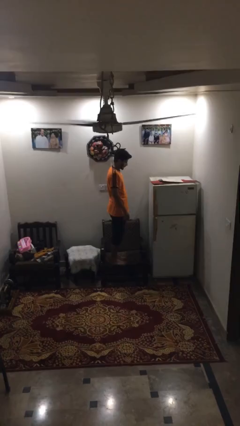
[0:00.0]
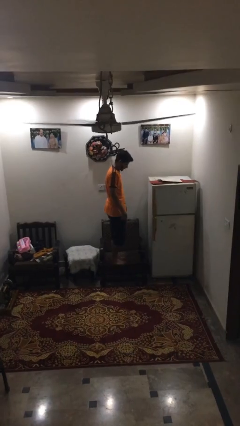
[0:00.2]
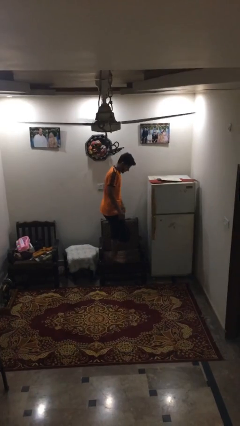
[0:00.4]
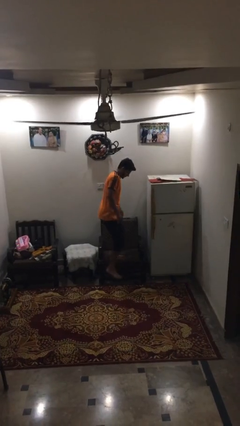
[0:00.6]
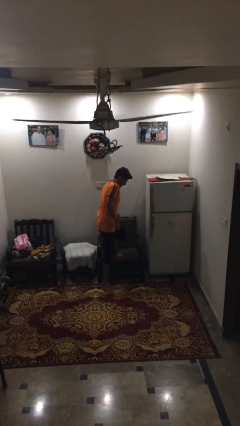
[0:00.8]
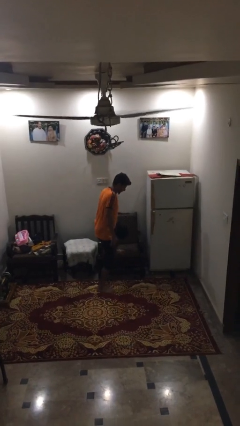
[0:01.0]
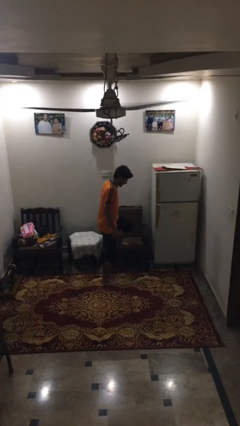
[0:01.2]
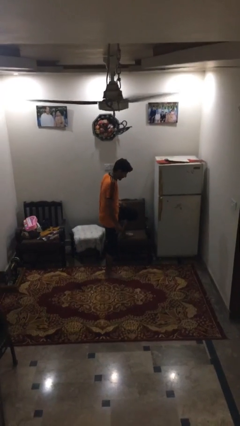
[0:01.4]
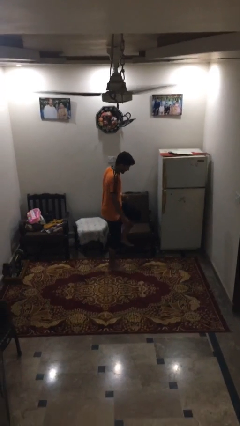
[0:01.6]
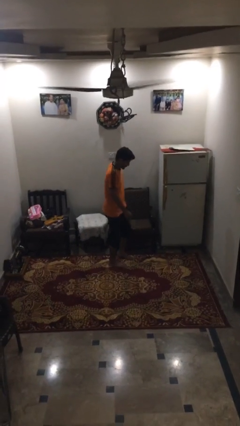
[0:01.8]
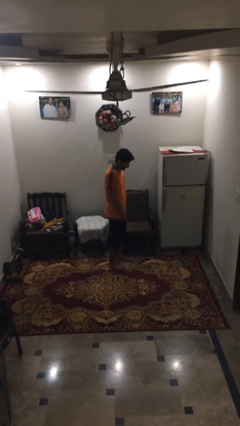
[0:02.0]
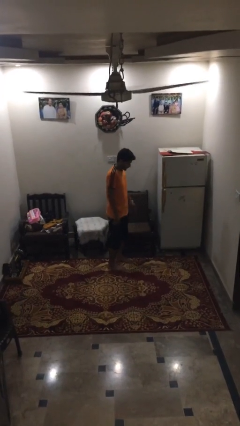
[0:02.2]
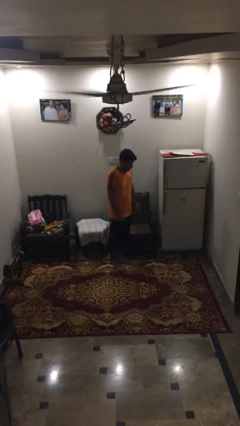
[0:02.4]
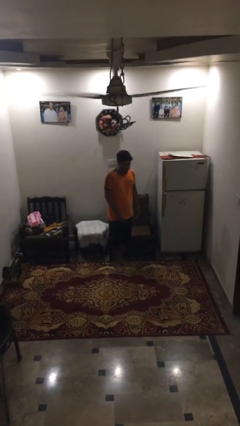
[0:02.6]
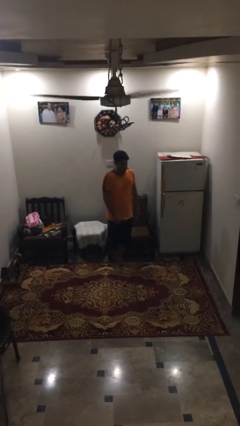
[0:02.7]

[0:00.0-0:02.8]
person climbs off couch

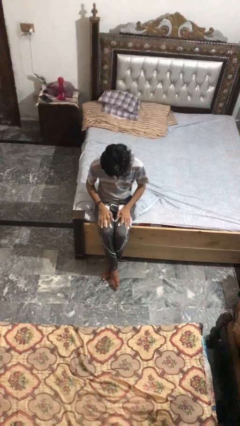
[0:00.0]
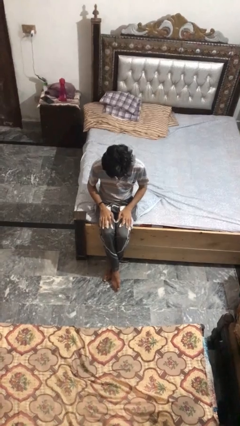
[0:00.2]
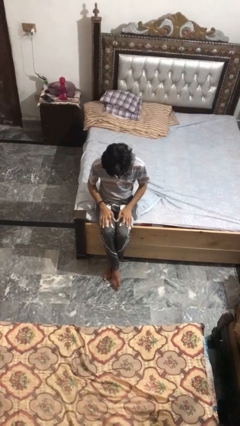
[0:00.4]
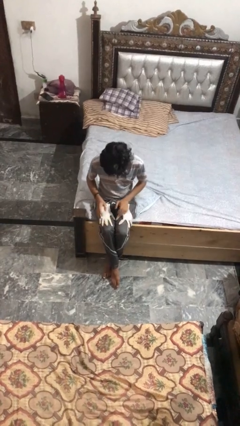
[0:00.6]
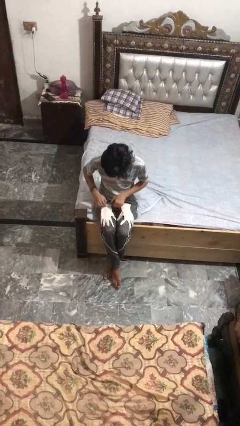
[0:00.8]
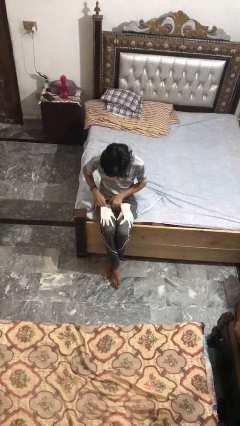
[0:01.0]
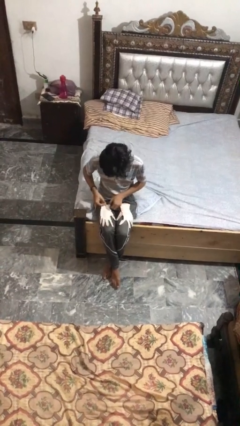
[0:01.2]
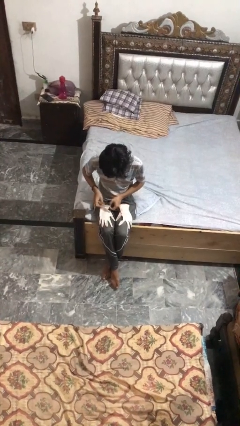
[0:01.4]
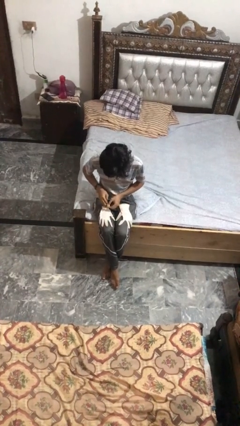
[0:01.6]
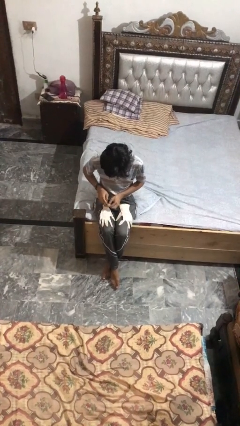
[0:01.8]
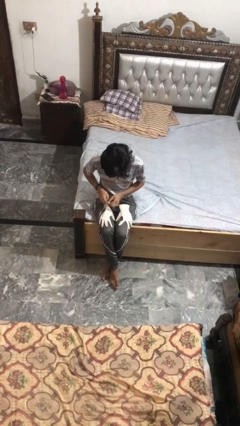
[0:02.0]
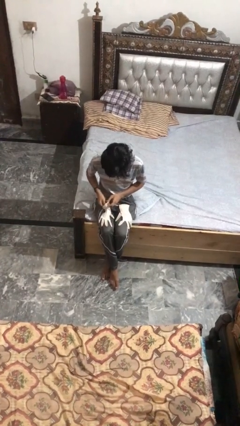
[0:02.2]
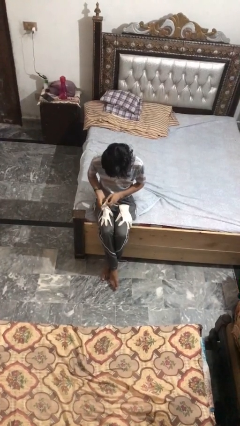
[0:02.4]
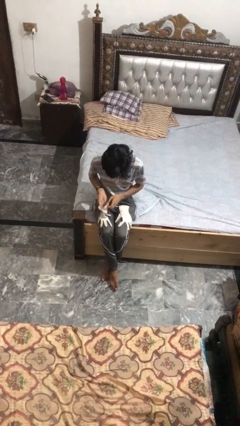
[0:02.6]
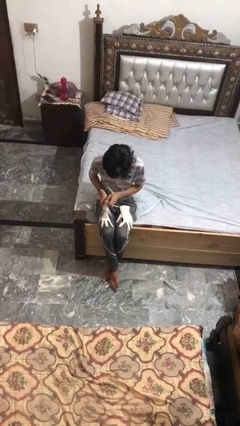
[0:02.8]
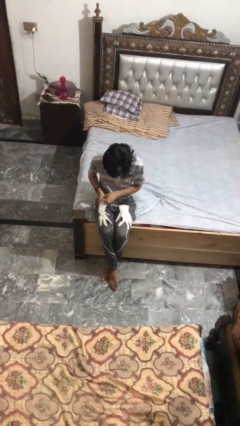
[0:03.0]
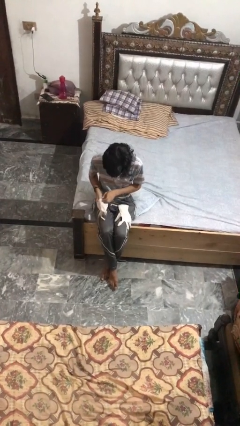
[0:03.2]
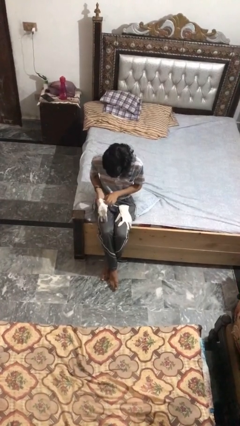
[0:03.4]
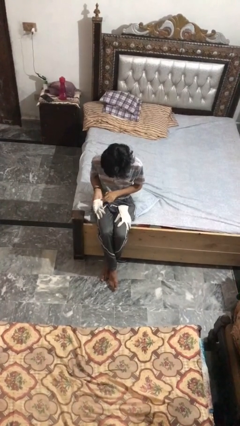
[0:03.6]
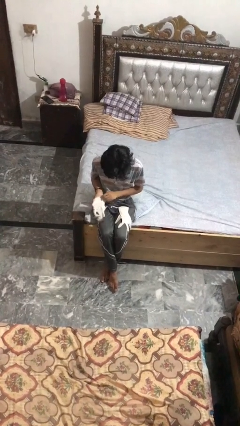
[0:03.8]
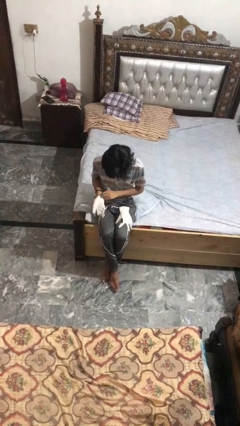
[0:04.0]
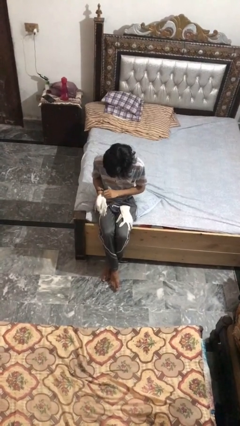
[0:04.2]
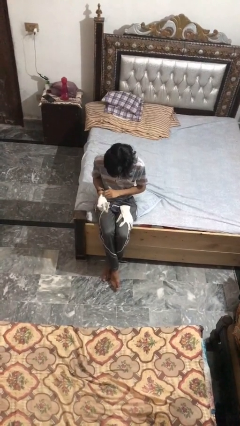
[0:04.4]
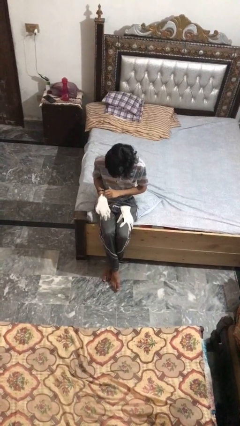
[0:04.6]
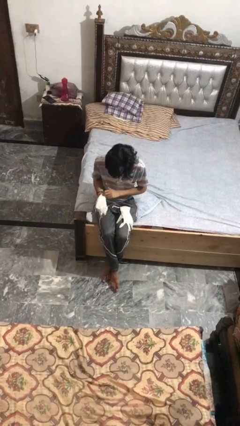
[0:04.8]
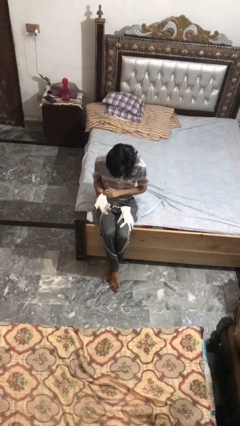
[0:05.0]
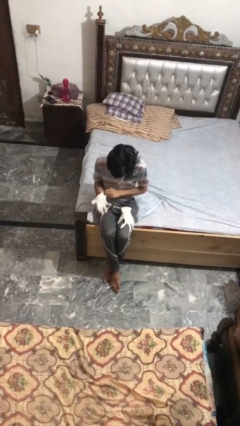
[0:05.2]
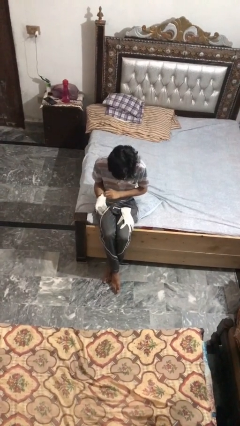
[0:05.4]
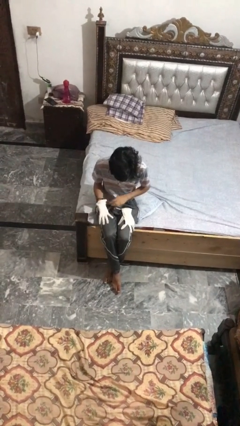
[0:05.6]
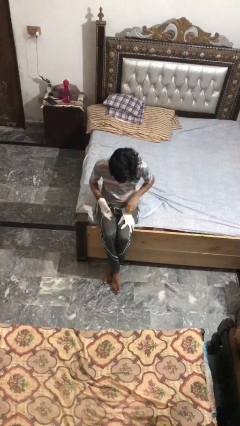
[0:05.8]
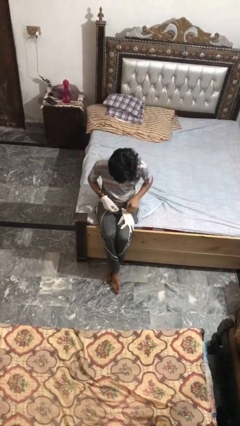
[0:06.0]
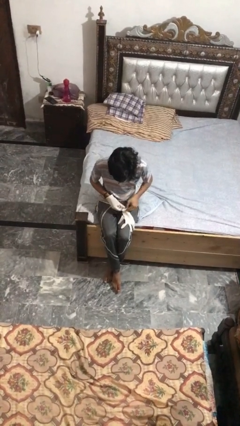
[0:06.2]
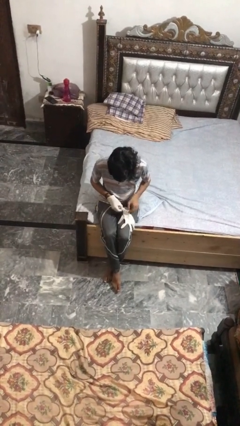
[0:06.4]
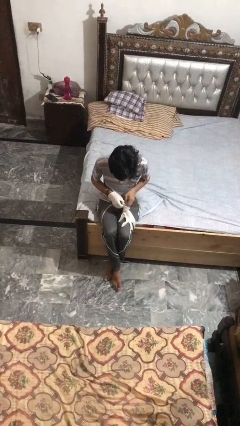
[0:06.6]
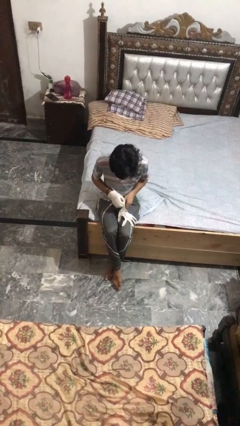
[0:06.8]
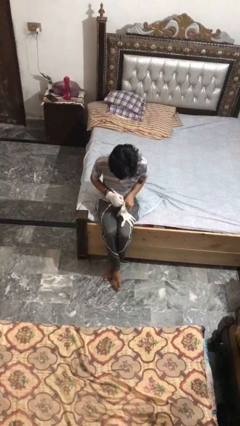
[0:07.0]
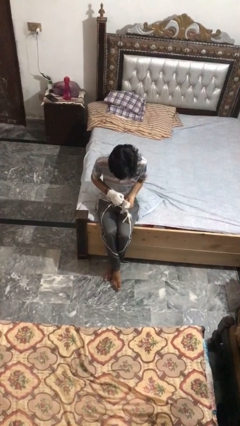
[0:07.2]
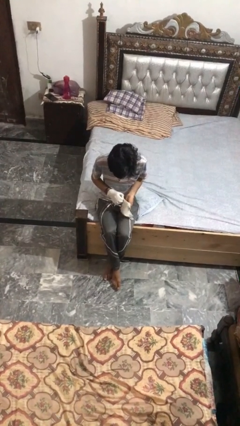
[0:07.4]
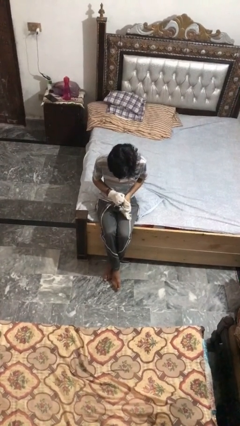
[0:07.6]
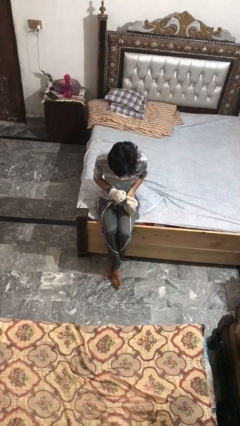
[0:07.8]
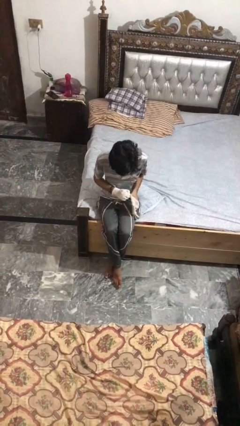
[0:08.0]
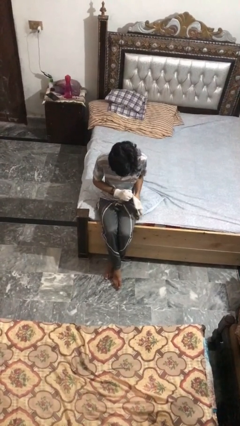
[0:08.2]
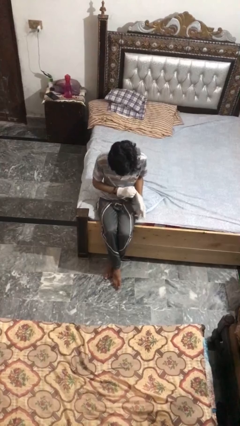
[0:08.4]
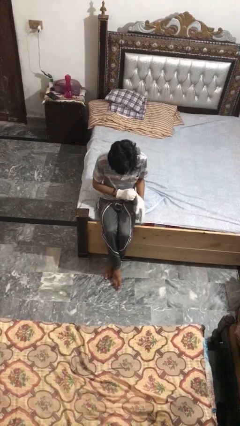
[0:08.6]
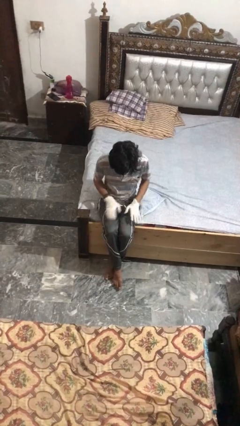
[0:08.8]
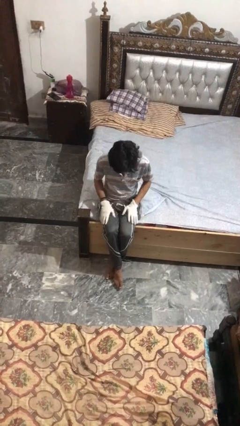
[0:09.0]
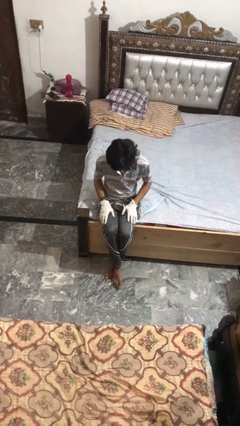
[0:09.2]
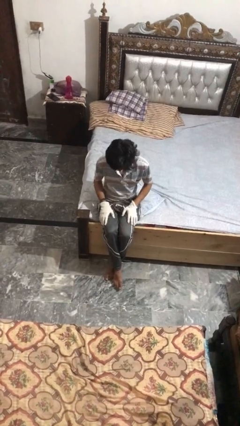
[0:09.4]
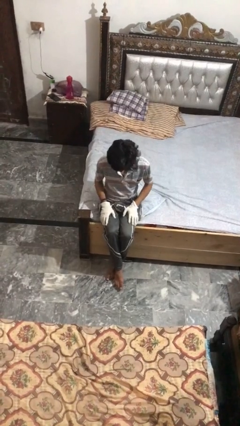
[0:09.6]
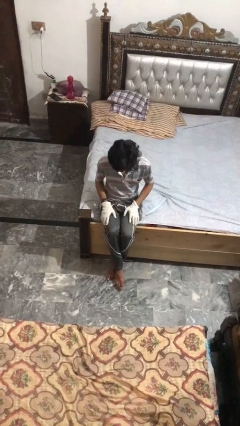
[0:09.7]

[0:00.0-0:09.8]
person puts on gloves

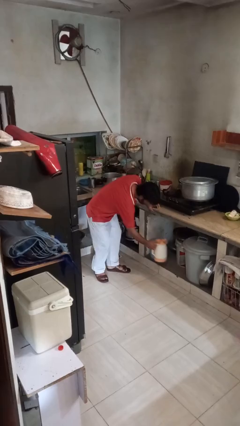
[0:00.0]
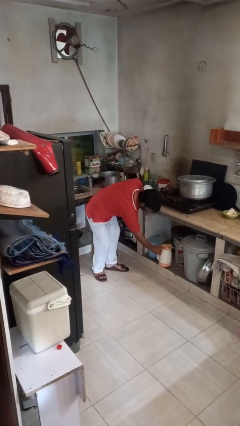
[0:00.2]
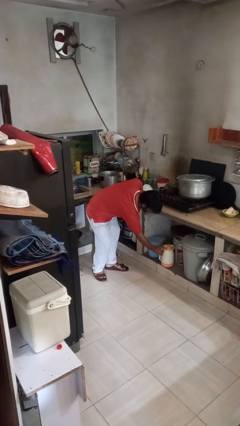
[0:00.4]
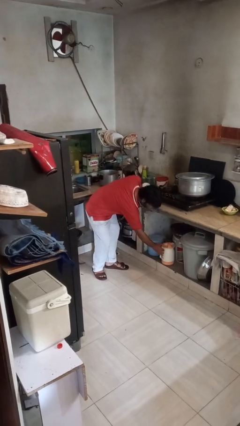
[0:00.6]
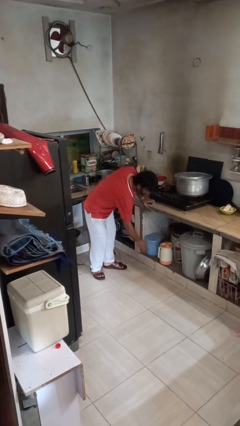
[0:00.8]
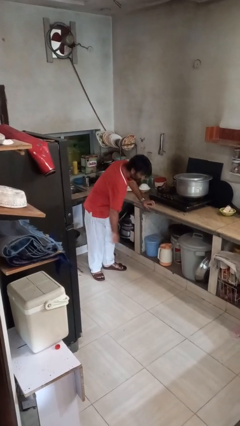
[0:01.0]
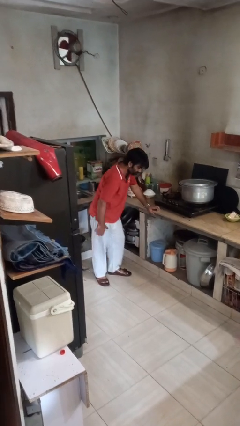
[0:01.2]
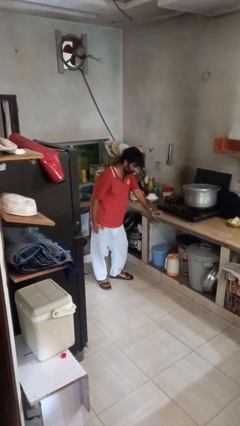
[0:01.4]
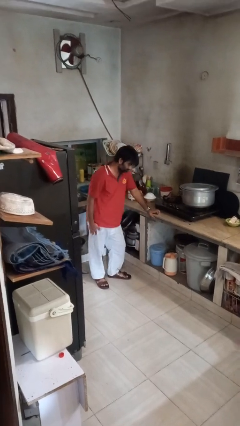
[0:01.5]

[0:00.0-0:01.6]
person puts down object into cabinet

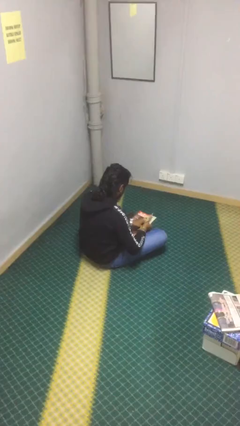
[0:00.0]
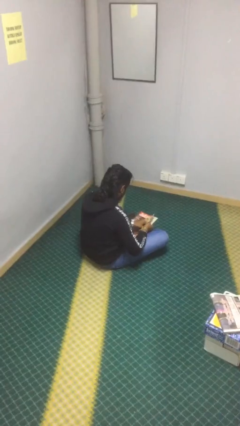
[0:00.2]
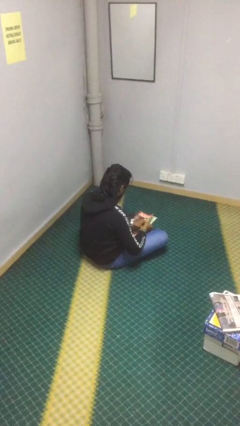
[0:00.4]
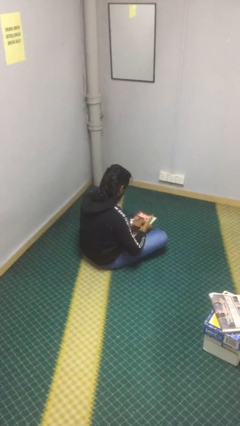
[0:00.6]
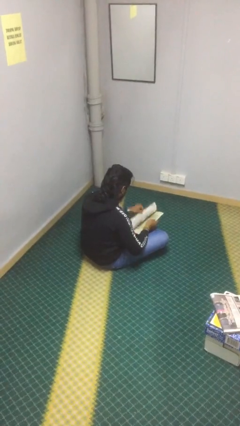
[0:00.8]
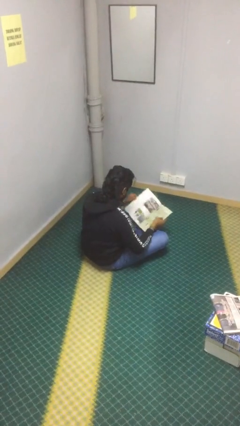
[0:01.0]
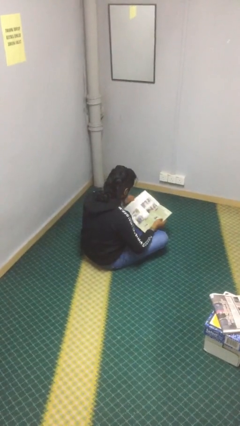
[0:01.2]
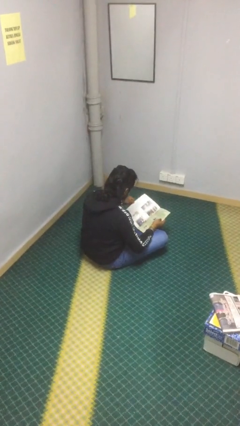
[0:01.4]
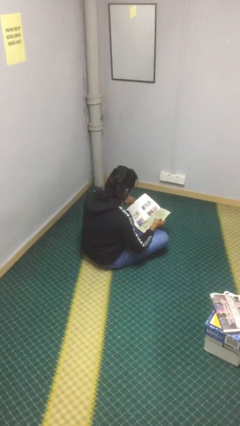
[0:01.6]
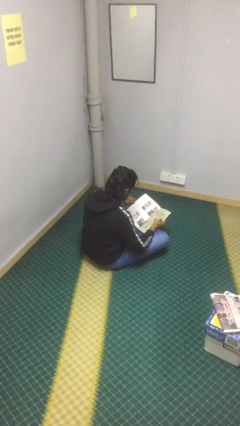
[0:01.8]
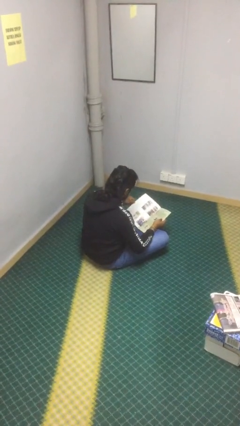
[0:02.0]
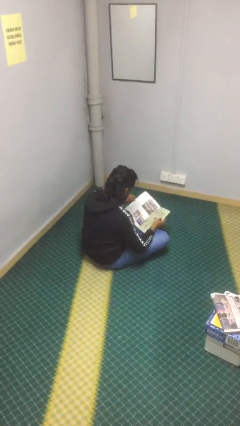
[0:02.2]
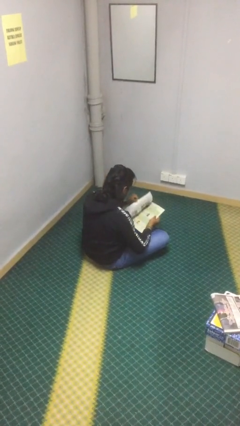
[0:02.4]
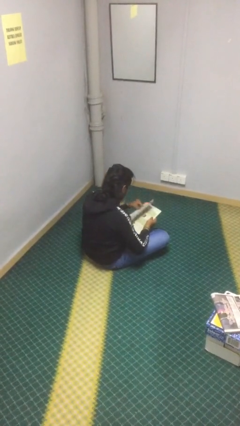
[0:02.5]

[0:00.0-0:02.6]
person reads magazine

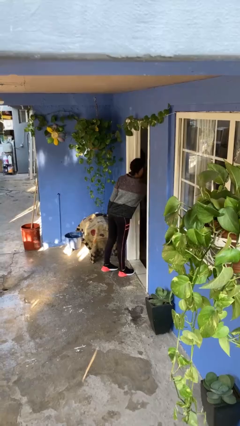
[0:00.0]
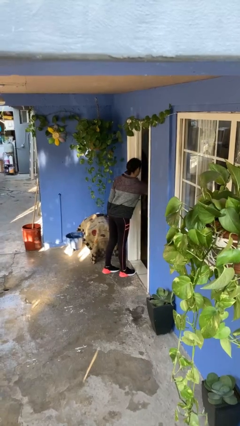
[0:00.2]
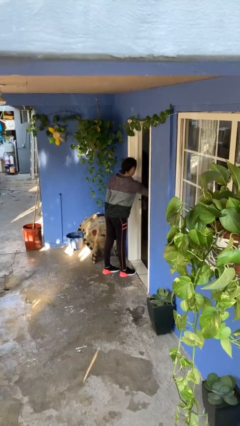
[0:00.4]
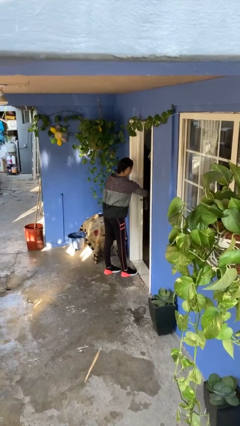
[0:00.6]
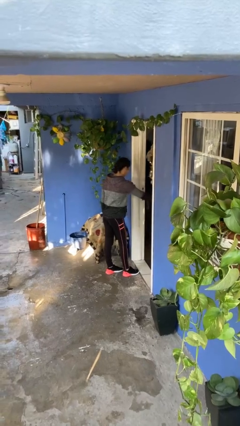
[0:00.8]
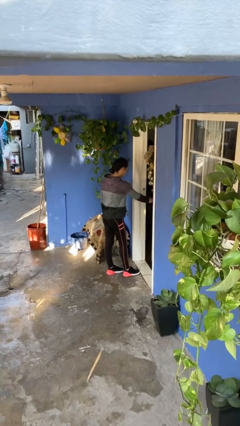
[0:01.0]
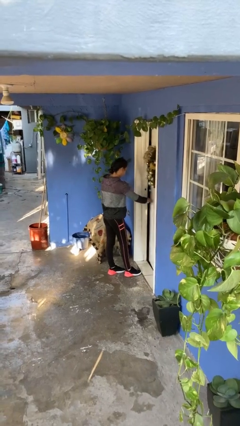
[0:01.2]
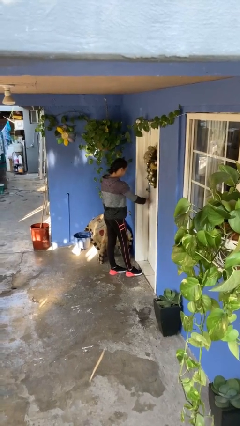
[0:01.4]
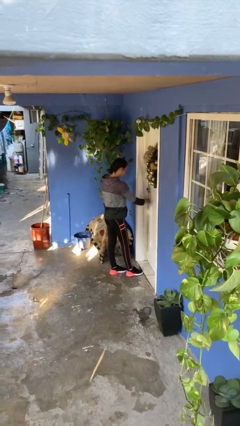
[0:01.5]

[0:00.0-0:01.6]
person closes facility door
